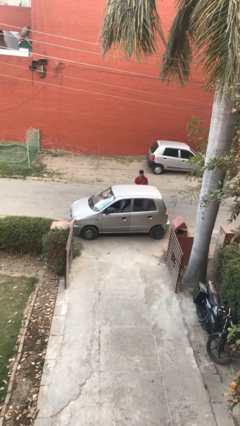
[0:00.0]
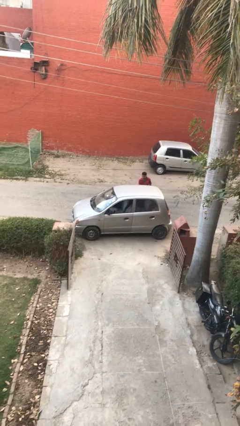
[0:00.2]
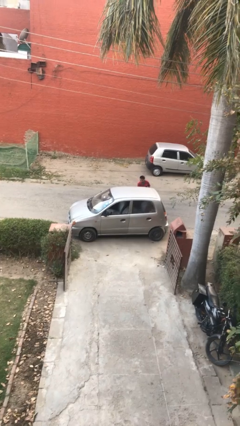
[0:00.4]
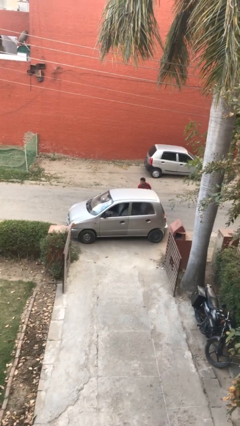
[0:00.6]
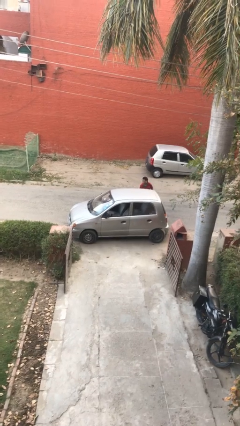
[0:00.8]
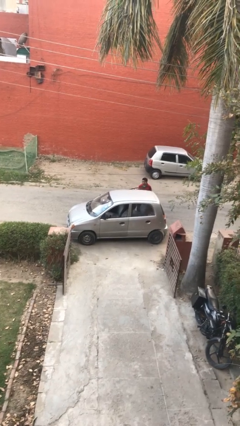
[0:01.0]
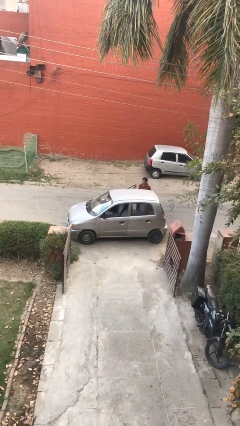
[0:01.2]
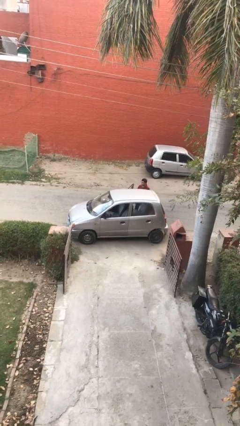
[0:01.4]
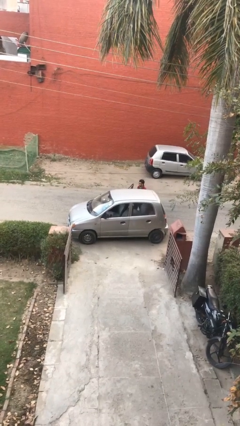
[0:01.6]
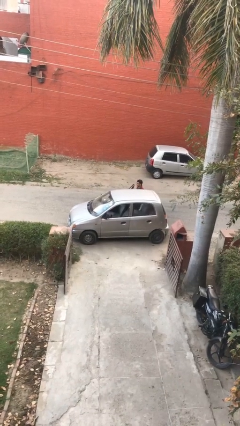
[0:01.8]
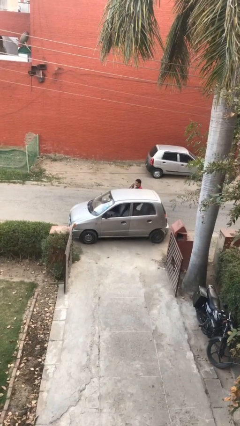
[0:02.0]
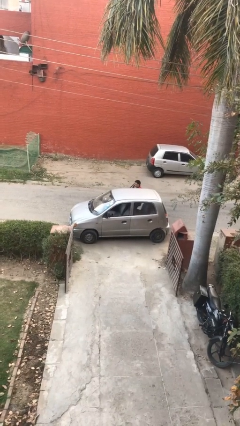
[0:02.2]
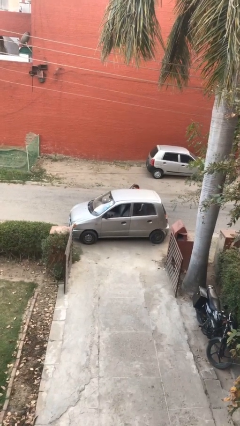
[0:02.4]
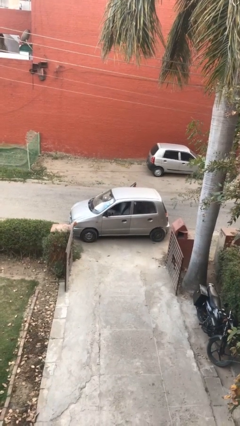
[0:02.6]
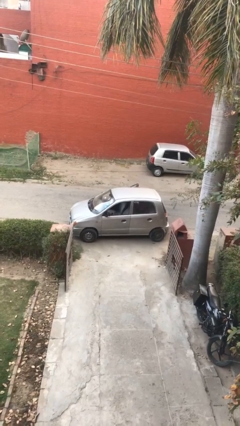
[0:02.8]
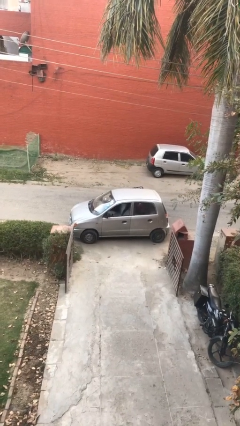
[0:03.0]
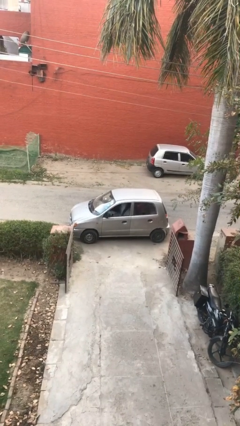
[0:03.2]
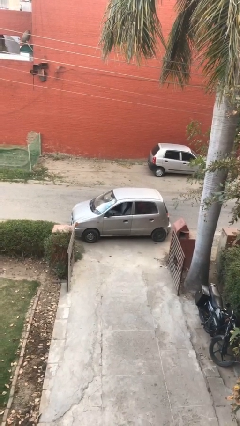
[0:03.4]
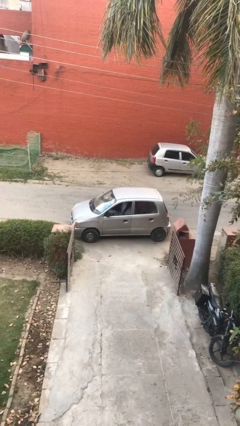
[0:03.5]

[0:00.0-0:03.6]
car picks up person

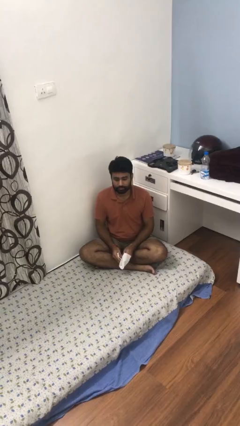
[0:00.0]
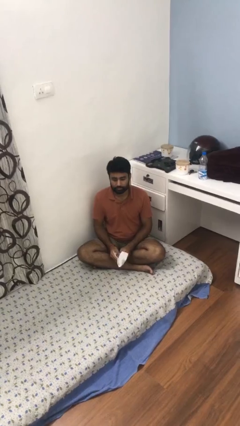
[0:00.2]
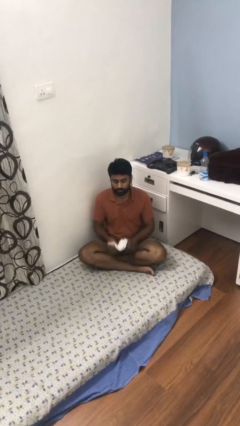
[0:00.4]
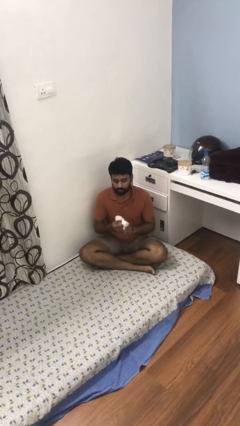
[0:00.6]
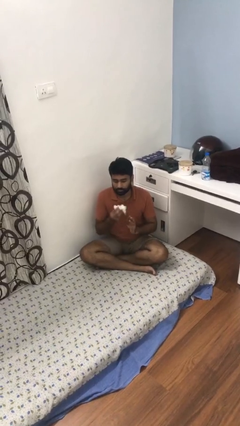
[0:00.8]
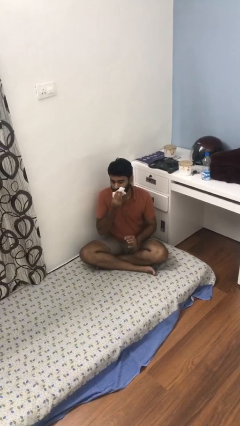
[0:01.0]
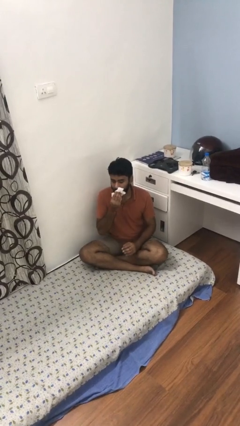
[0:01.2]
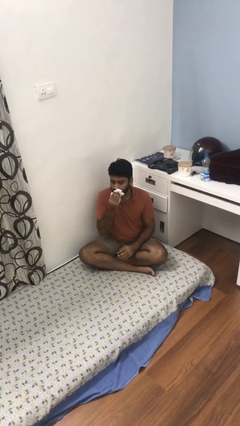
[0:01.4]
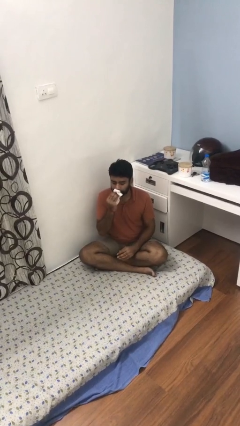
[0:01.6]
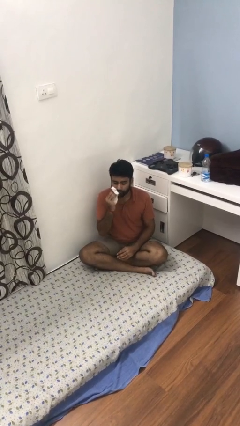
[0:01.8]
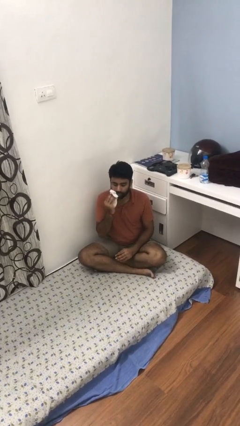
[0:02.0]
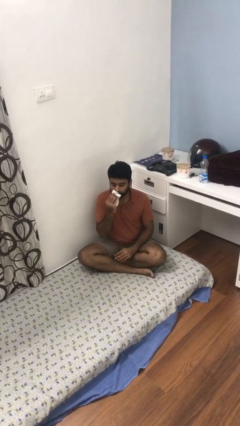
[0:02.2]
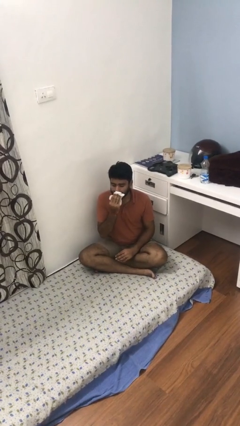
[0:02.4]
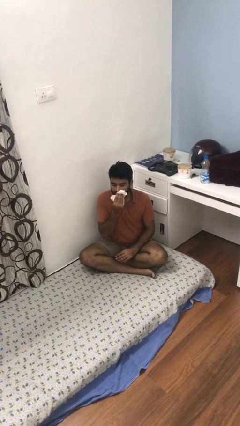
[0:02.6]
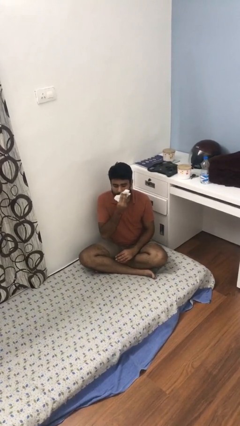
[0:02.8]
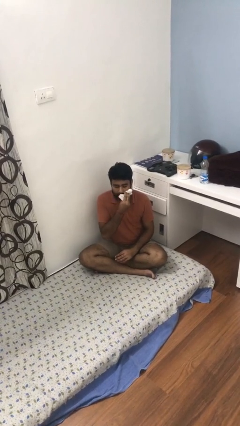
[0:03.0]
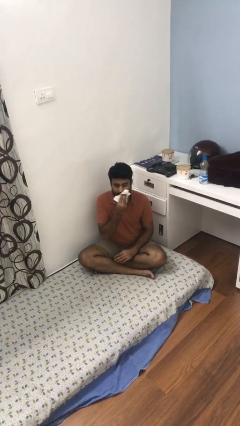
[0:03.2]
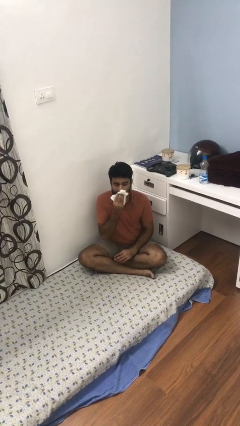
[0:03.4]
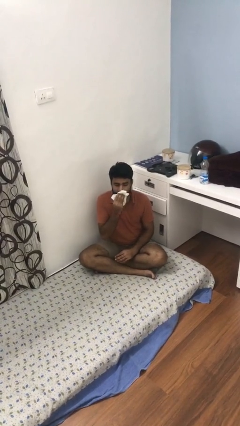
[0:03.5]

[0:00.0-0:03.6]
person wipes mouth with napkin

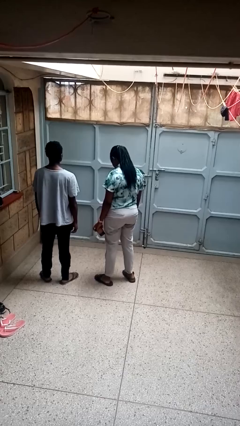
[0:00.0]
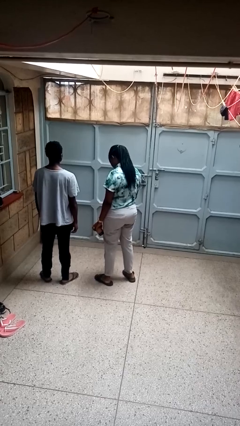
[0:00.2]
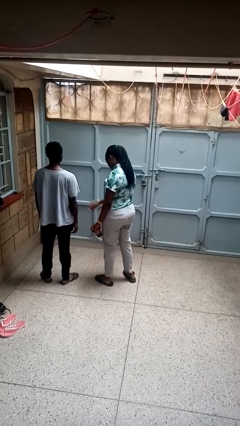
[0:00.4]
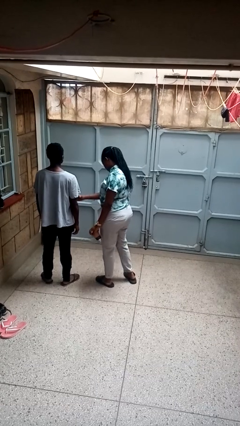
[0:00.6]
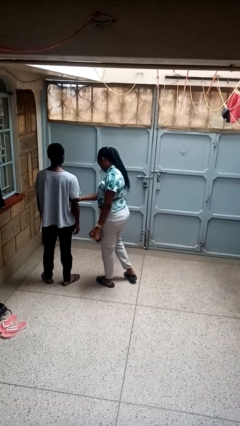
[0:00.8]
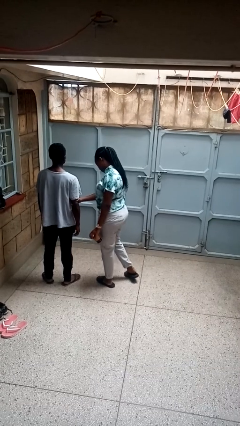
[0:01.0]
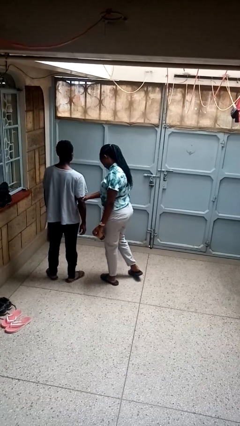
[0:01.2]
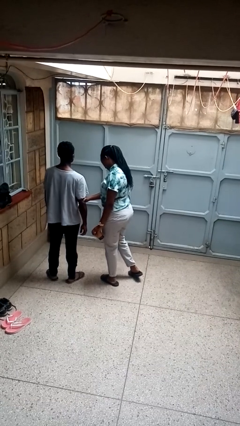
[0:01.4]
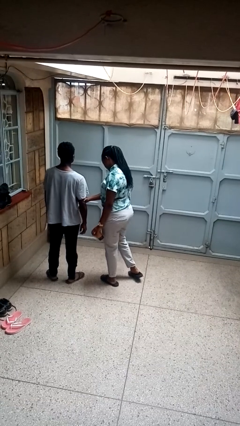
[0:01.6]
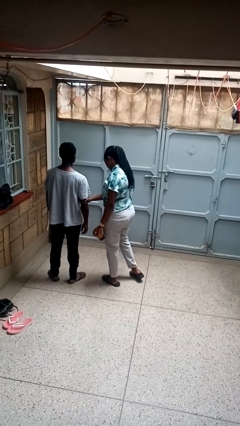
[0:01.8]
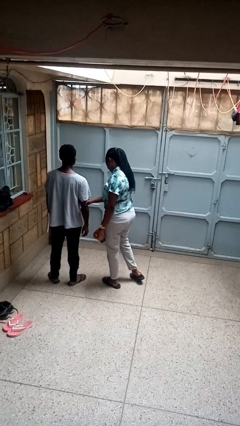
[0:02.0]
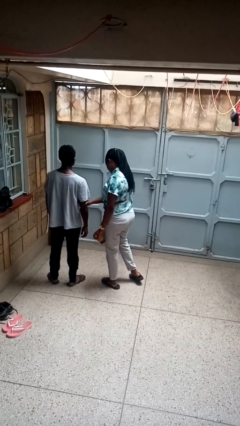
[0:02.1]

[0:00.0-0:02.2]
person grabs person by bicep

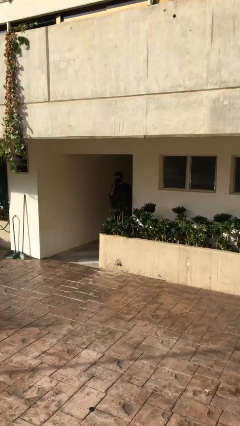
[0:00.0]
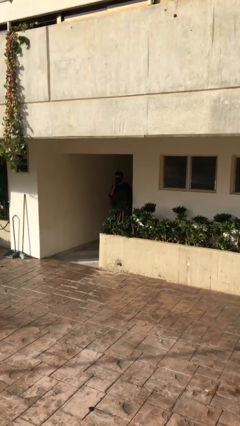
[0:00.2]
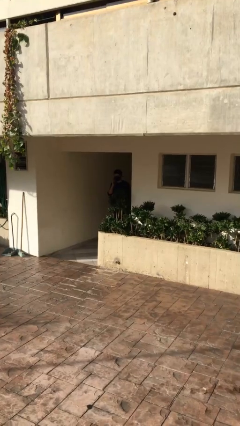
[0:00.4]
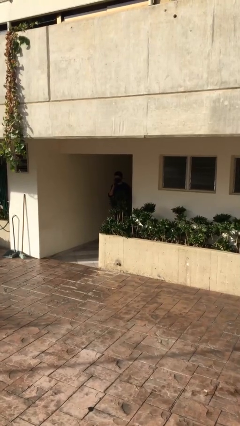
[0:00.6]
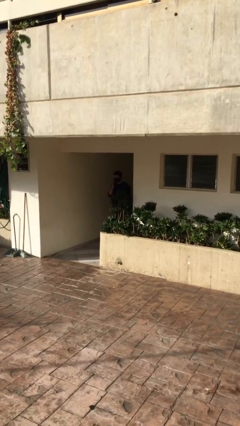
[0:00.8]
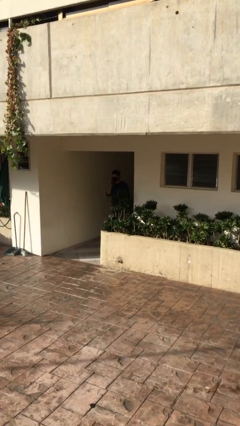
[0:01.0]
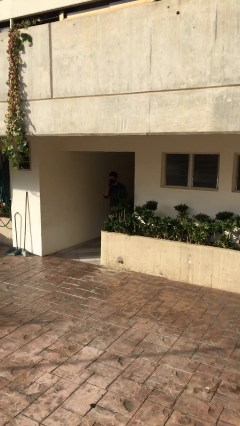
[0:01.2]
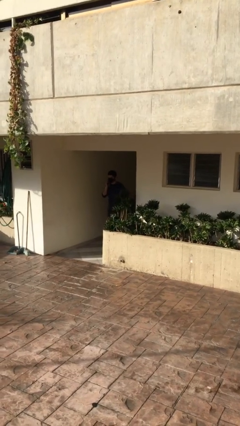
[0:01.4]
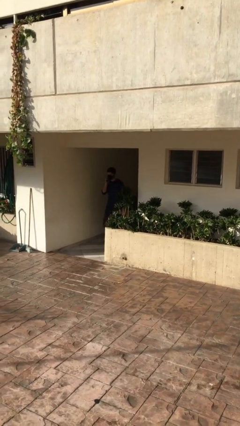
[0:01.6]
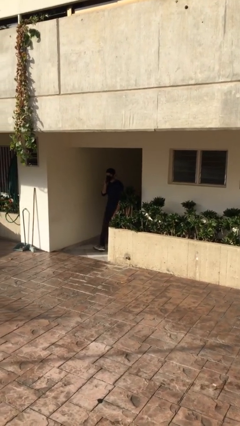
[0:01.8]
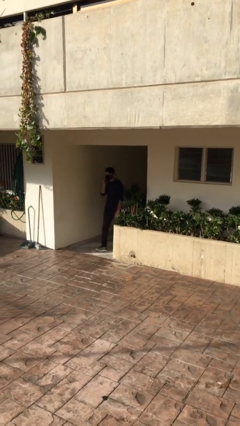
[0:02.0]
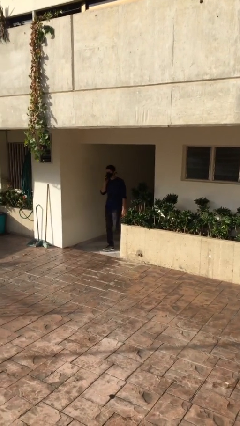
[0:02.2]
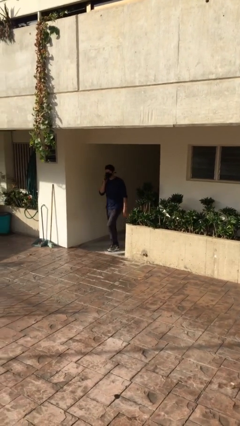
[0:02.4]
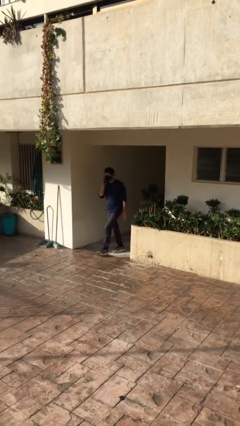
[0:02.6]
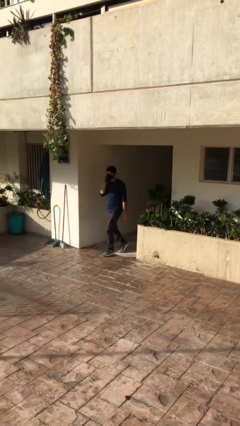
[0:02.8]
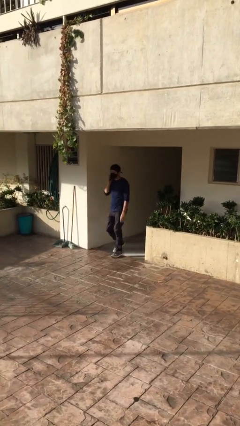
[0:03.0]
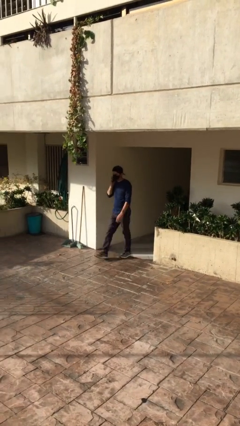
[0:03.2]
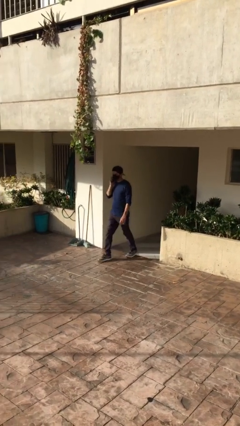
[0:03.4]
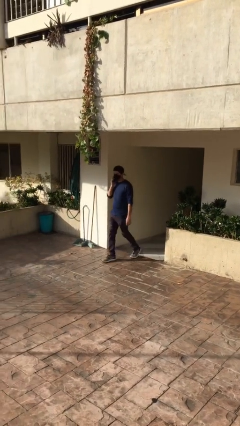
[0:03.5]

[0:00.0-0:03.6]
person enters scene through structure

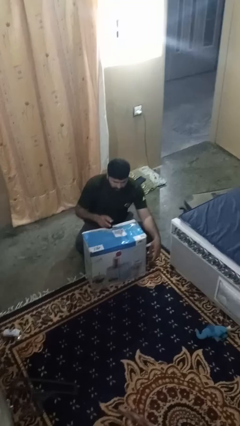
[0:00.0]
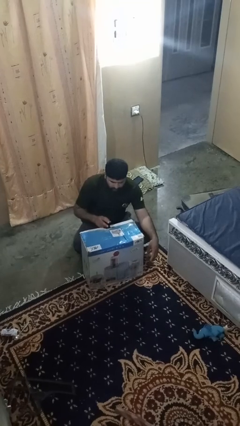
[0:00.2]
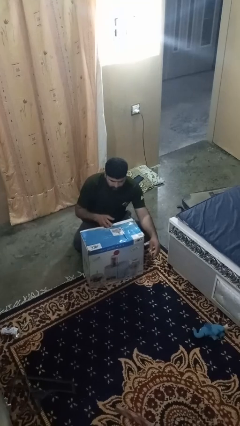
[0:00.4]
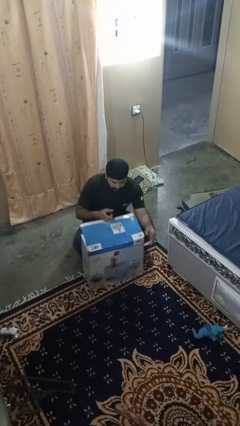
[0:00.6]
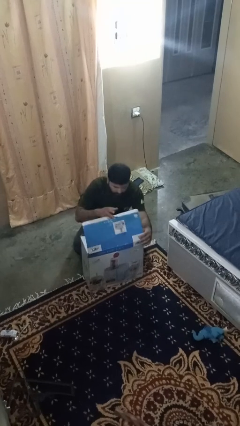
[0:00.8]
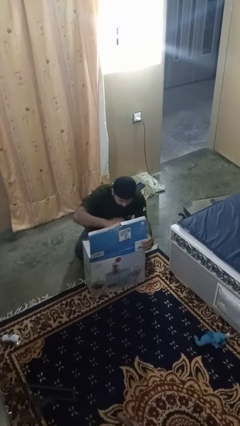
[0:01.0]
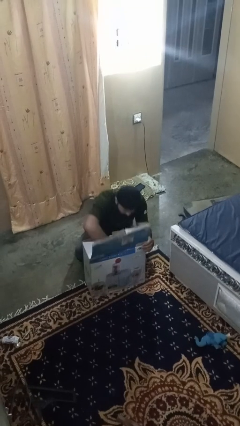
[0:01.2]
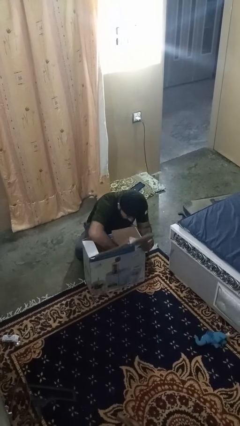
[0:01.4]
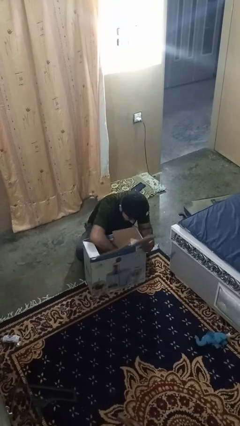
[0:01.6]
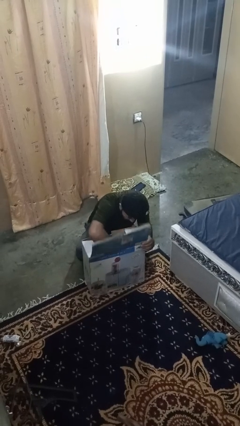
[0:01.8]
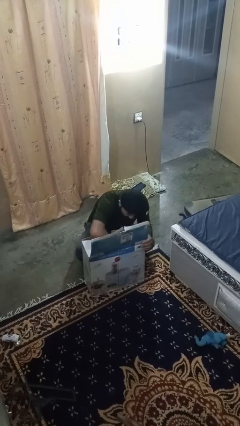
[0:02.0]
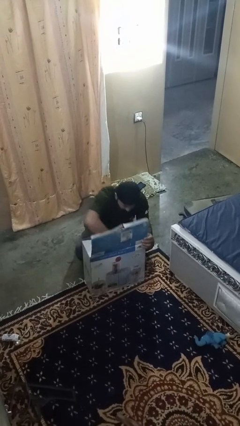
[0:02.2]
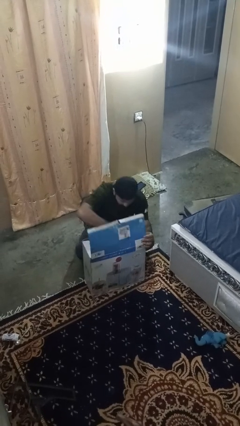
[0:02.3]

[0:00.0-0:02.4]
person searches in box

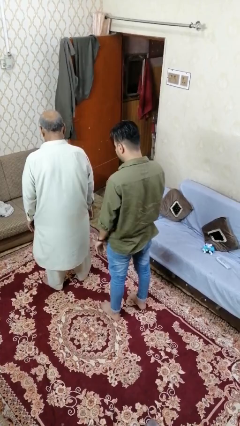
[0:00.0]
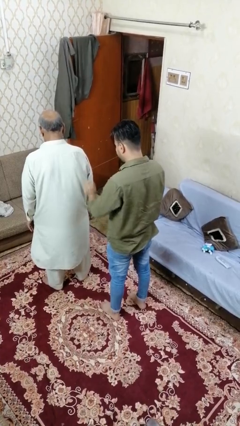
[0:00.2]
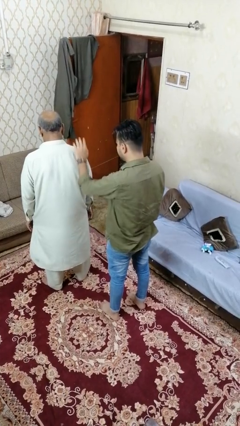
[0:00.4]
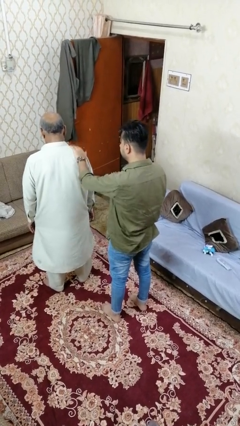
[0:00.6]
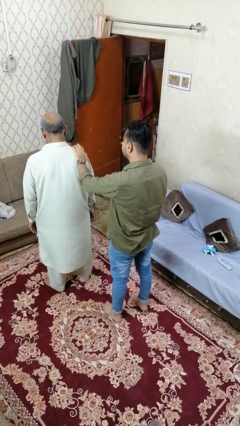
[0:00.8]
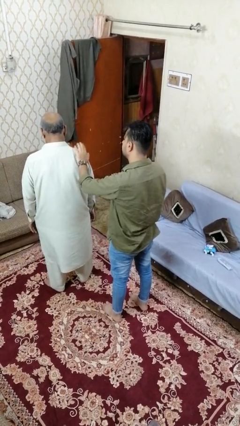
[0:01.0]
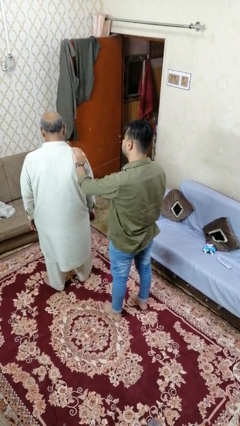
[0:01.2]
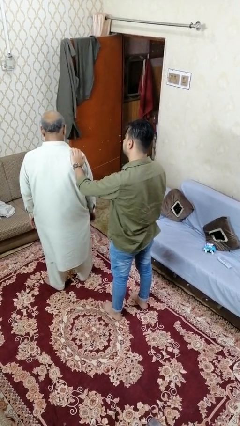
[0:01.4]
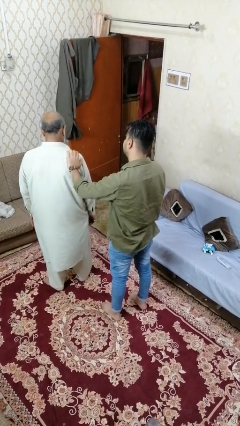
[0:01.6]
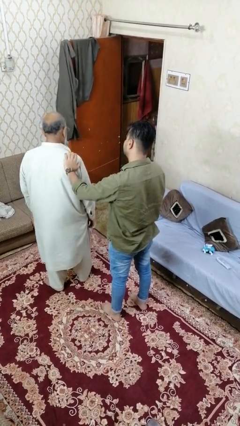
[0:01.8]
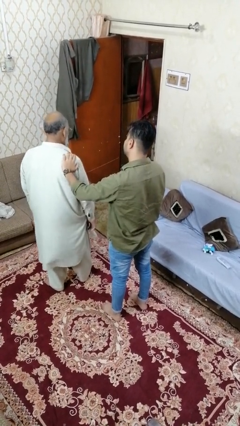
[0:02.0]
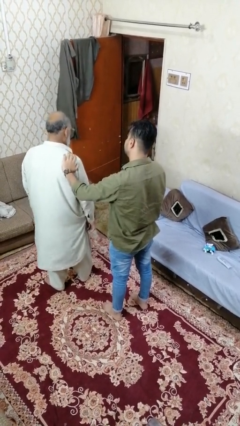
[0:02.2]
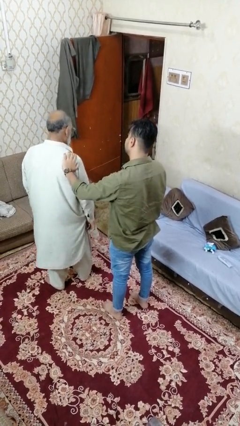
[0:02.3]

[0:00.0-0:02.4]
person touches back of person
